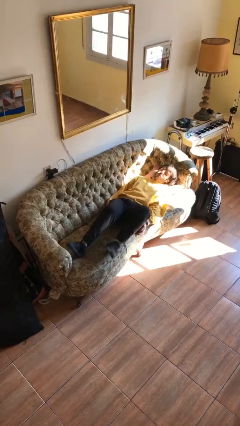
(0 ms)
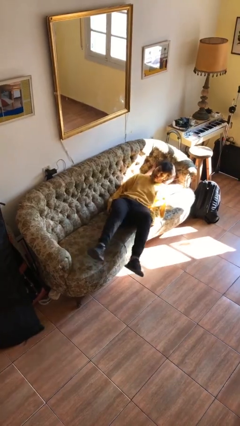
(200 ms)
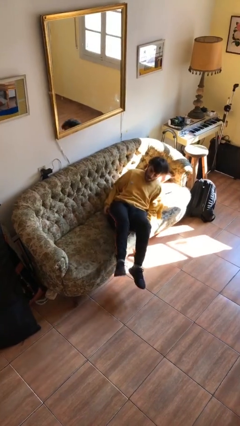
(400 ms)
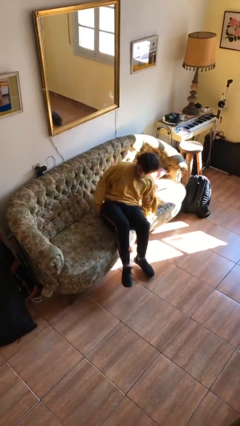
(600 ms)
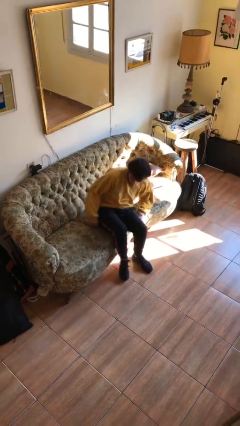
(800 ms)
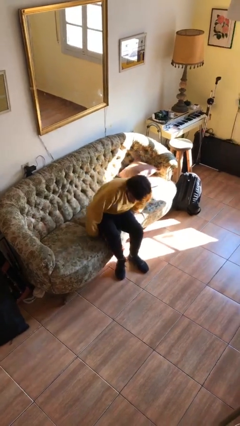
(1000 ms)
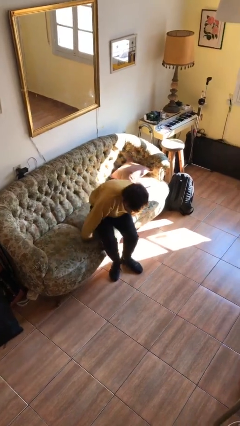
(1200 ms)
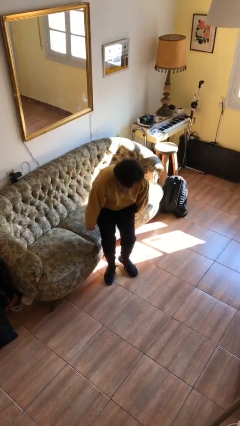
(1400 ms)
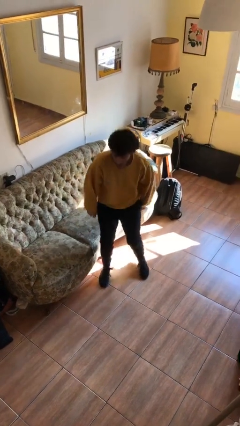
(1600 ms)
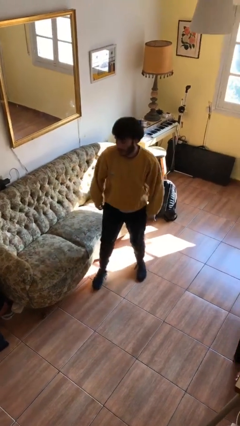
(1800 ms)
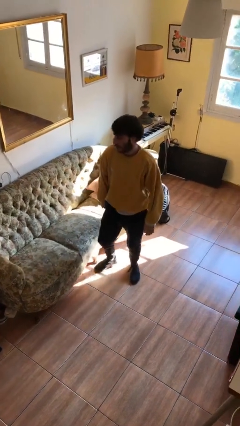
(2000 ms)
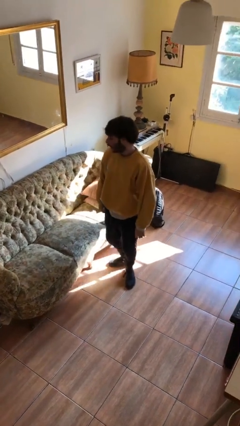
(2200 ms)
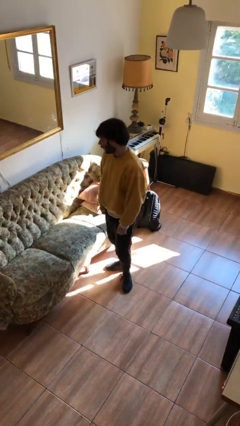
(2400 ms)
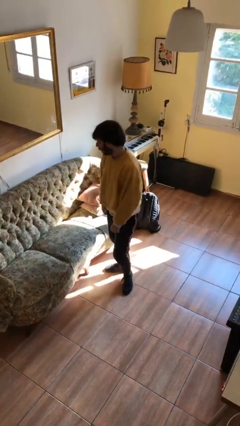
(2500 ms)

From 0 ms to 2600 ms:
person stands up

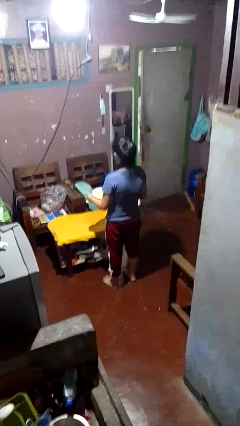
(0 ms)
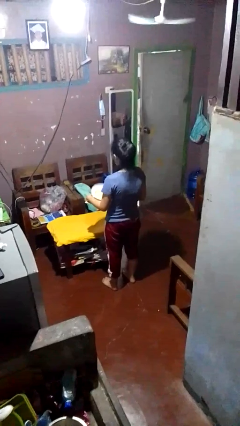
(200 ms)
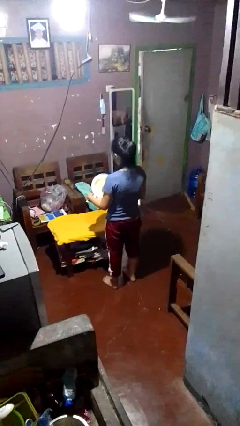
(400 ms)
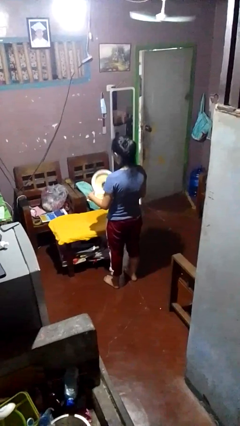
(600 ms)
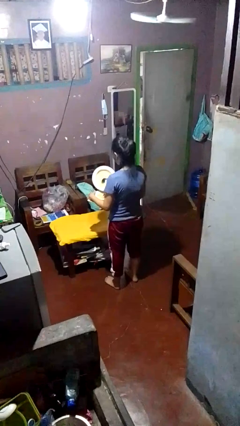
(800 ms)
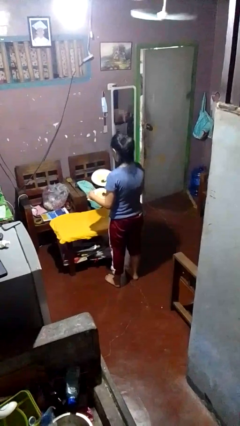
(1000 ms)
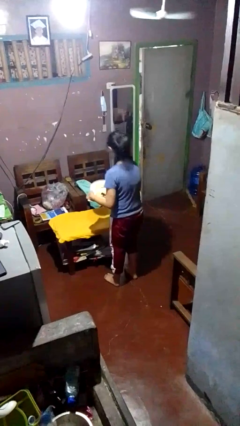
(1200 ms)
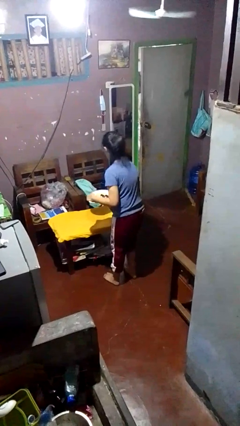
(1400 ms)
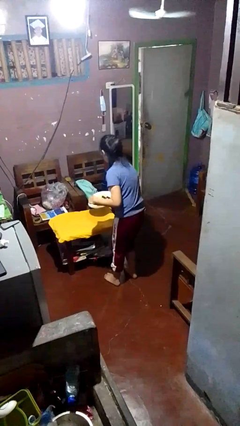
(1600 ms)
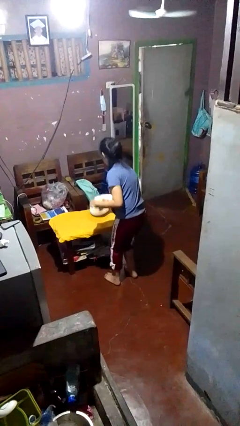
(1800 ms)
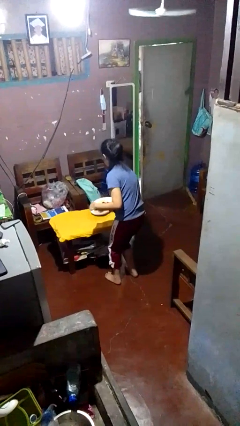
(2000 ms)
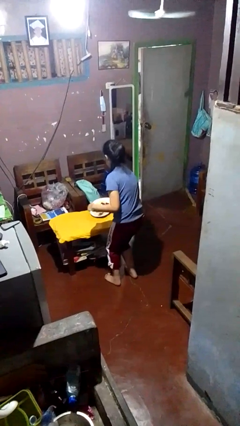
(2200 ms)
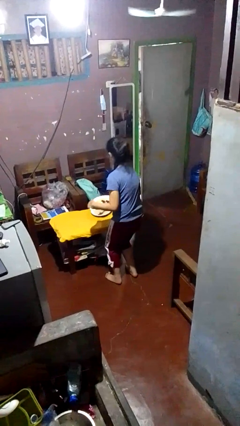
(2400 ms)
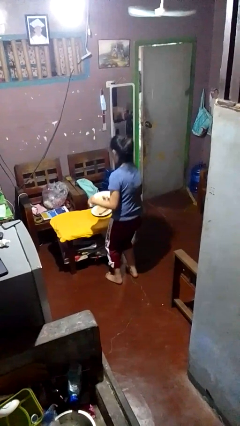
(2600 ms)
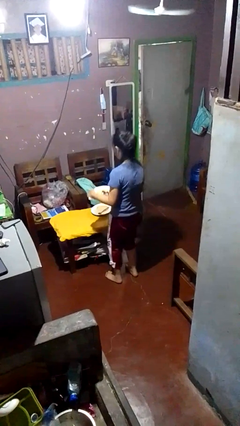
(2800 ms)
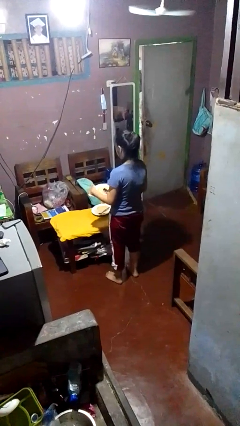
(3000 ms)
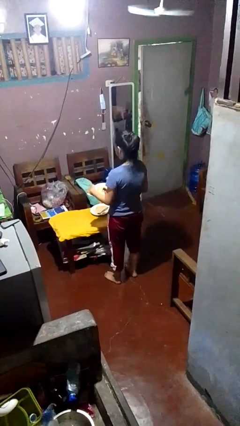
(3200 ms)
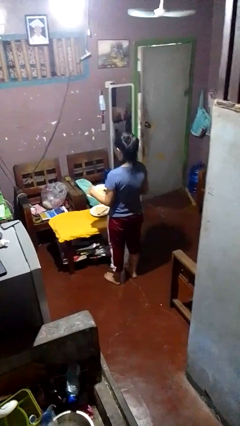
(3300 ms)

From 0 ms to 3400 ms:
person sets table

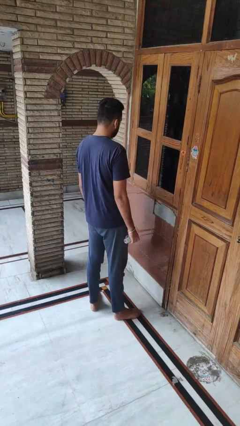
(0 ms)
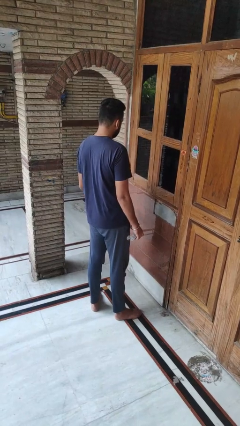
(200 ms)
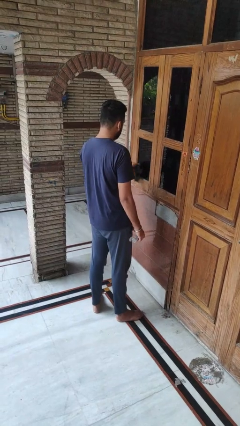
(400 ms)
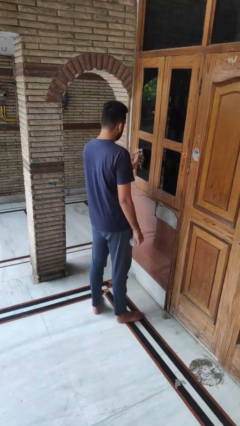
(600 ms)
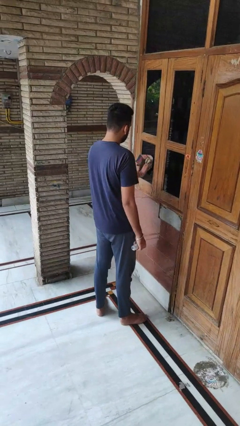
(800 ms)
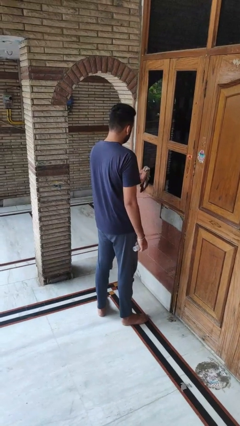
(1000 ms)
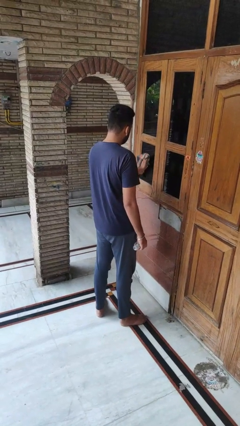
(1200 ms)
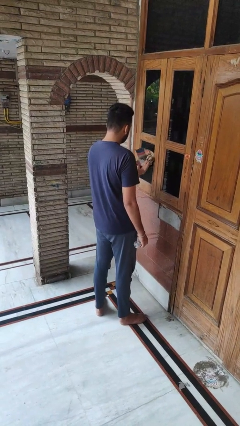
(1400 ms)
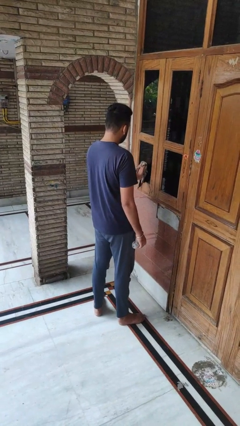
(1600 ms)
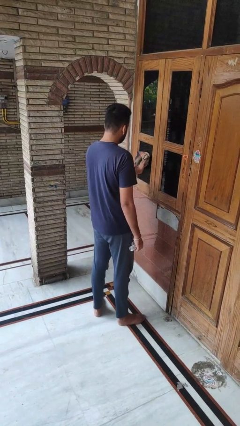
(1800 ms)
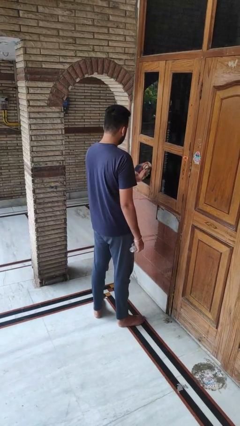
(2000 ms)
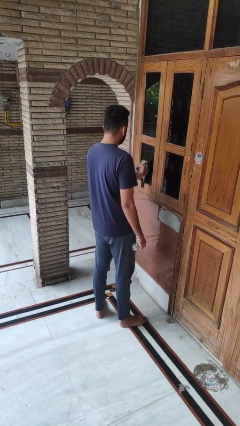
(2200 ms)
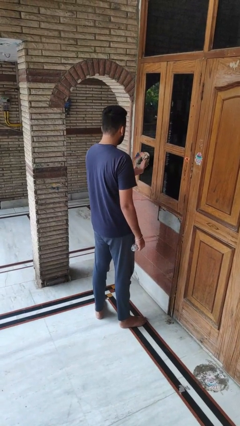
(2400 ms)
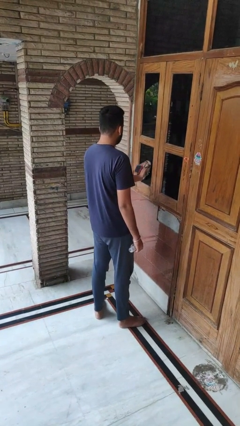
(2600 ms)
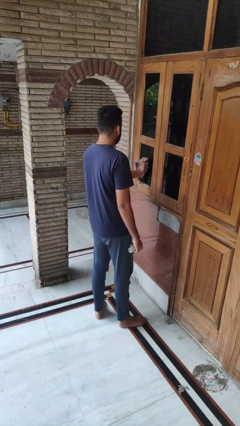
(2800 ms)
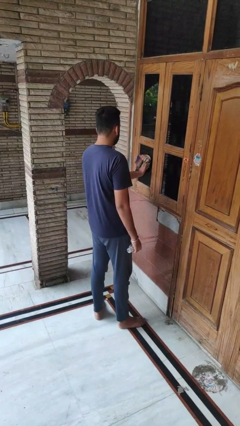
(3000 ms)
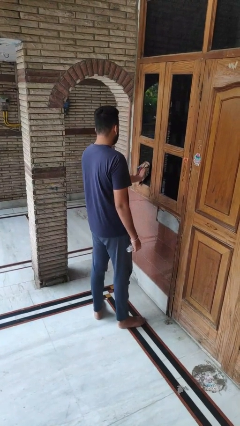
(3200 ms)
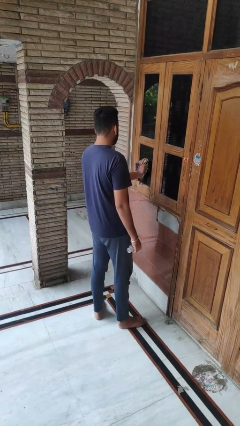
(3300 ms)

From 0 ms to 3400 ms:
person washes window

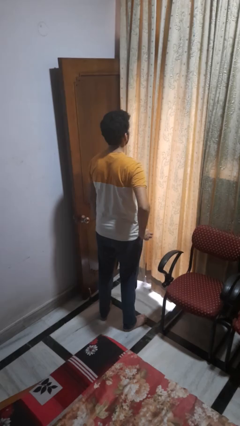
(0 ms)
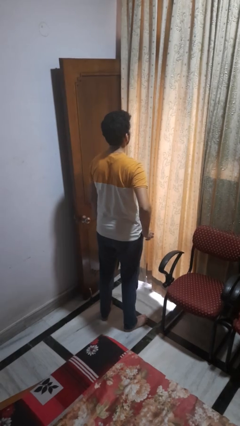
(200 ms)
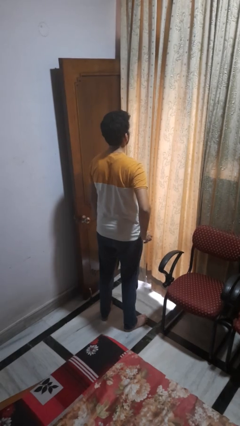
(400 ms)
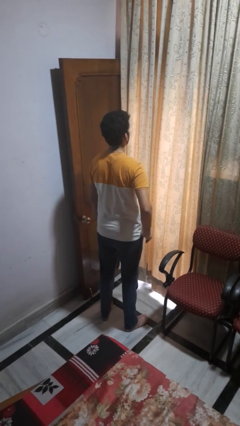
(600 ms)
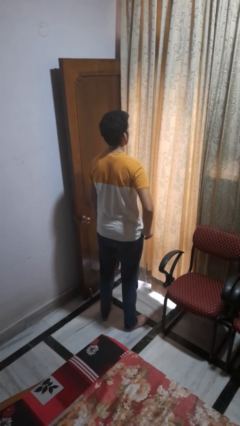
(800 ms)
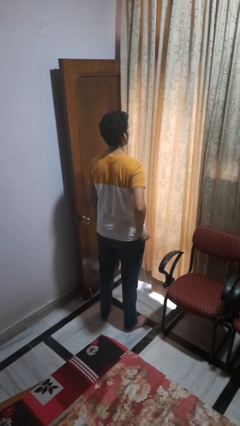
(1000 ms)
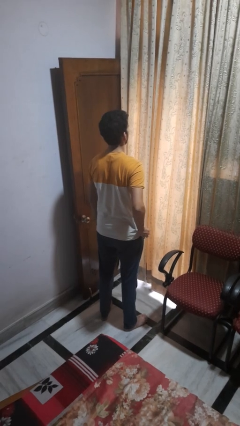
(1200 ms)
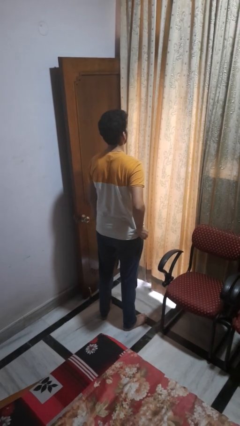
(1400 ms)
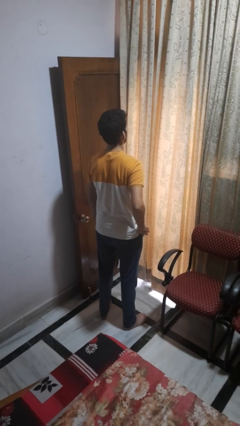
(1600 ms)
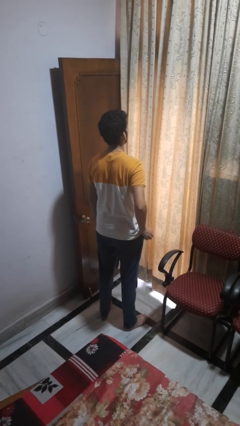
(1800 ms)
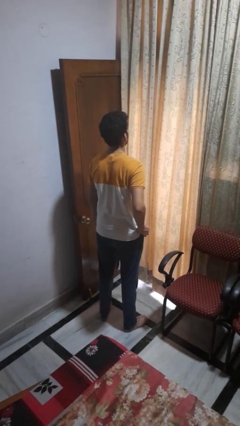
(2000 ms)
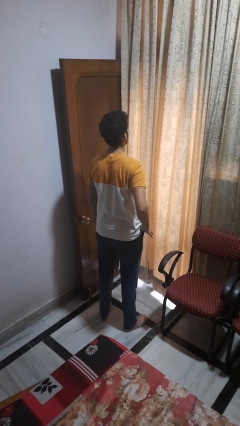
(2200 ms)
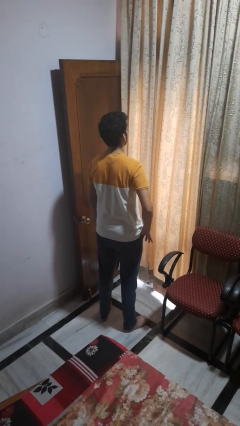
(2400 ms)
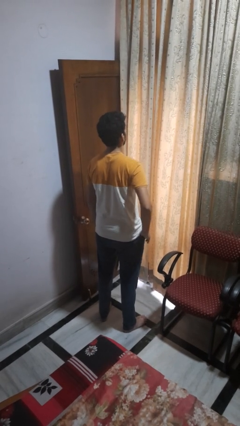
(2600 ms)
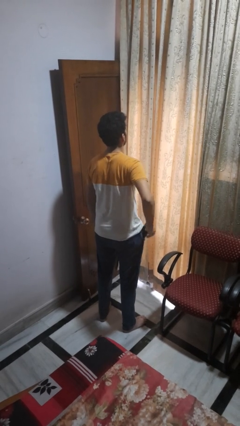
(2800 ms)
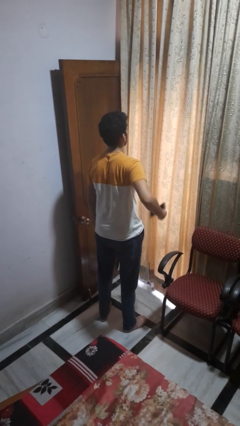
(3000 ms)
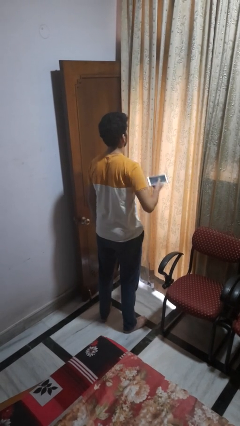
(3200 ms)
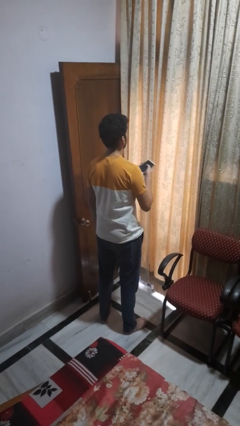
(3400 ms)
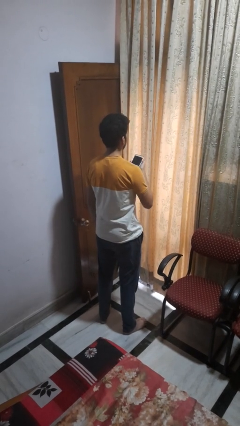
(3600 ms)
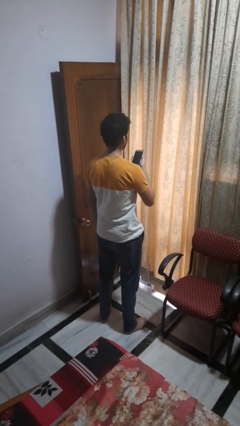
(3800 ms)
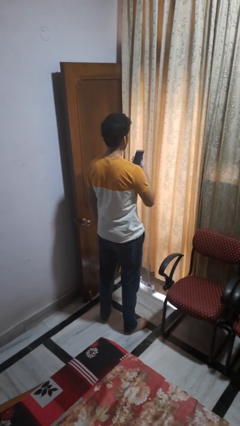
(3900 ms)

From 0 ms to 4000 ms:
person takes phone from pocket

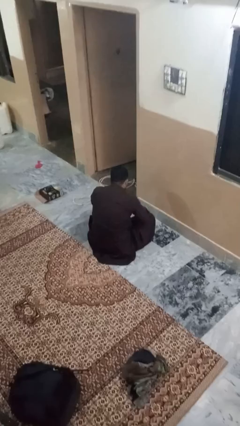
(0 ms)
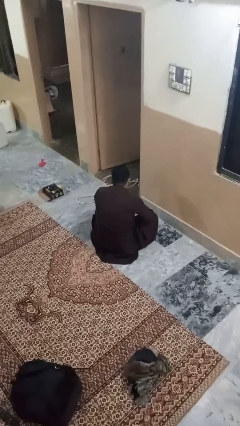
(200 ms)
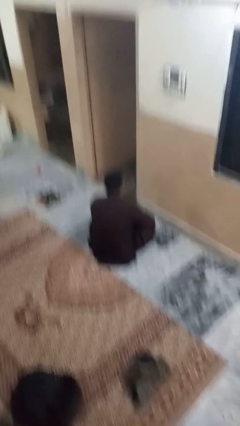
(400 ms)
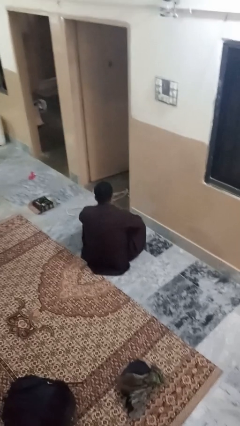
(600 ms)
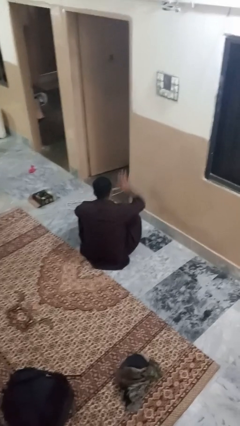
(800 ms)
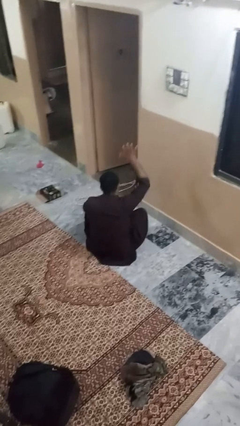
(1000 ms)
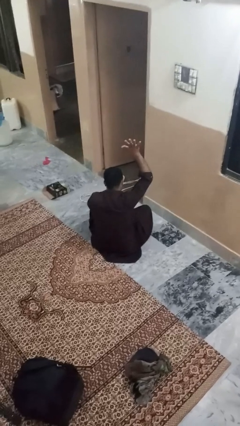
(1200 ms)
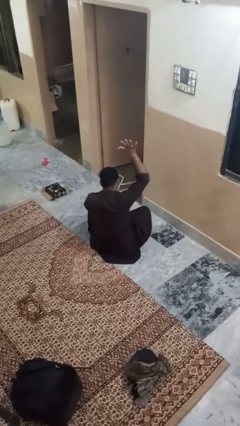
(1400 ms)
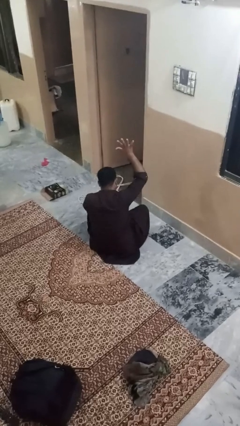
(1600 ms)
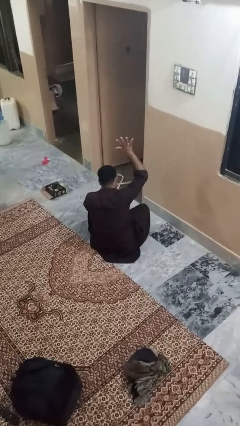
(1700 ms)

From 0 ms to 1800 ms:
person gestures number five

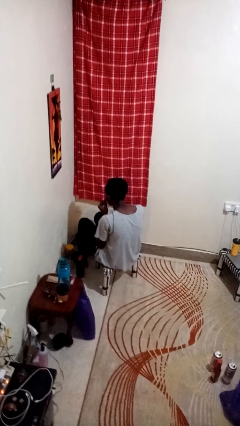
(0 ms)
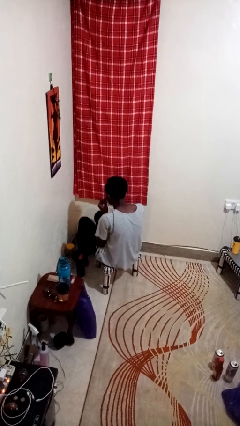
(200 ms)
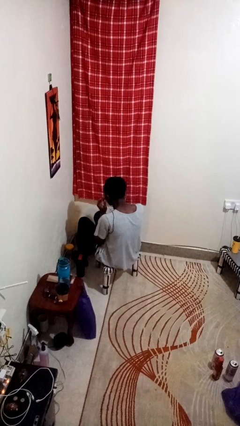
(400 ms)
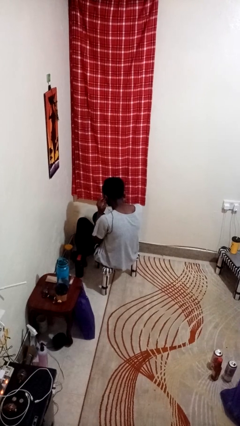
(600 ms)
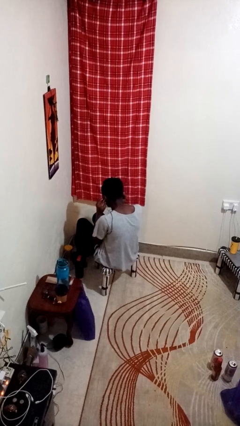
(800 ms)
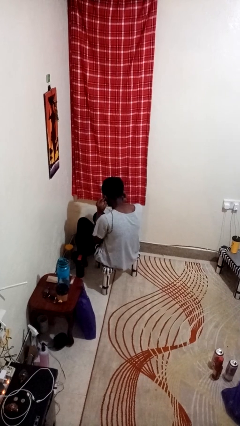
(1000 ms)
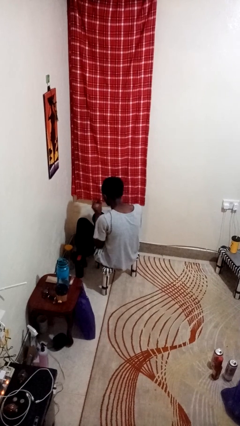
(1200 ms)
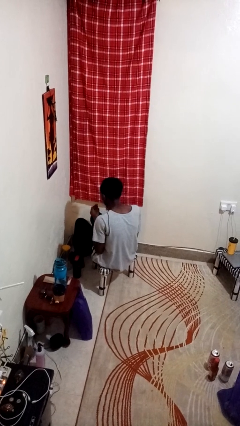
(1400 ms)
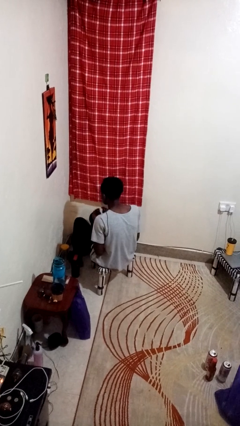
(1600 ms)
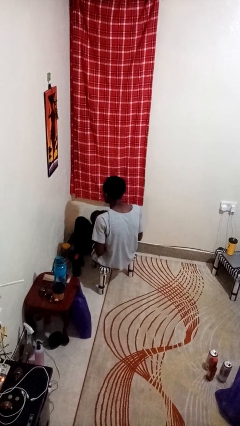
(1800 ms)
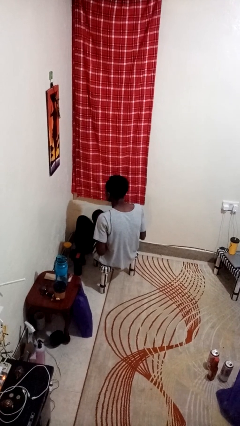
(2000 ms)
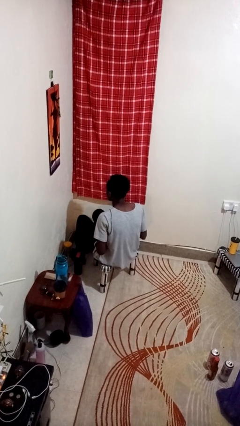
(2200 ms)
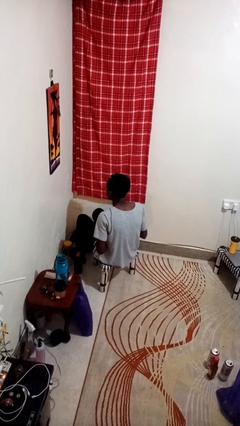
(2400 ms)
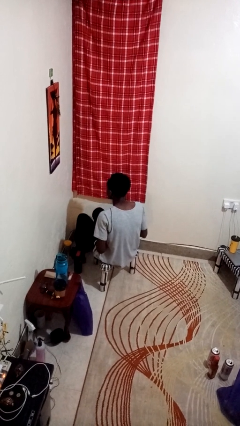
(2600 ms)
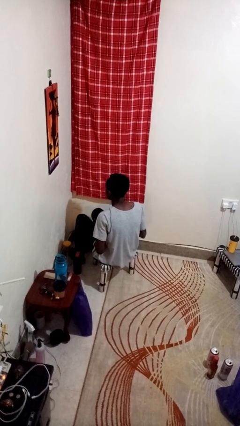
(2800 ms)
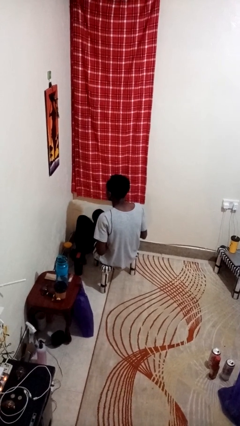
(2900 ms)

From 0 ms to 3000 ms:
person takes off headphones
